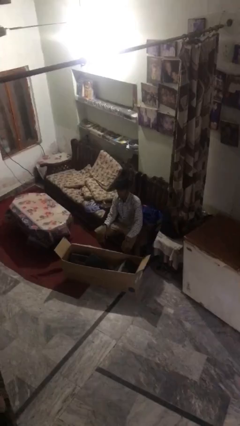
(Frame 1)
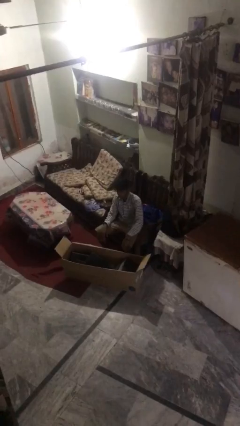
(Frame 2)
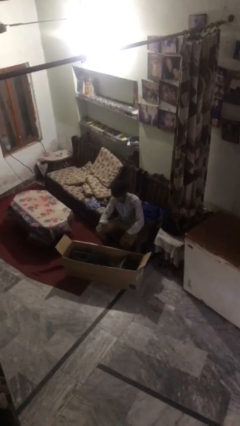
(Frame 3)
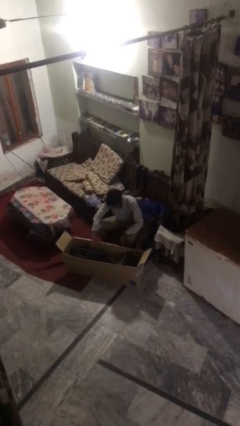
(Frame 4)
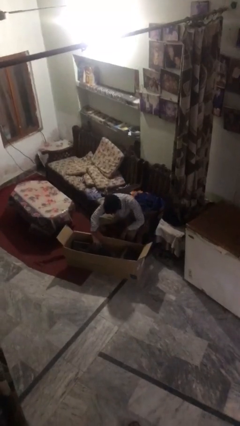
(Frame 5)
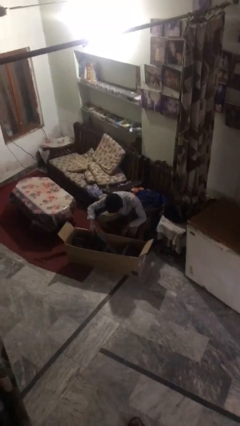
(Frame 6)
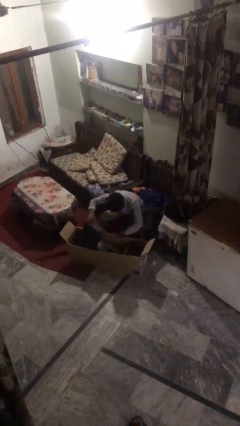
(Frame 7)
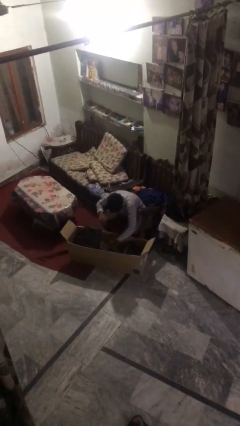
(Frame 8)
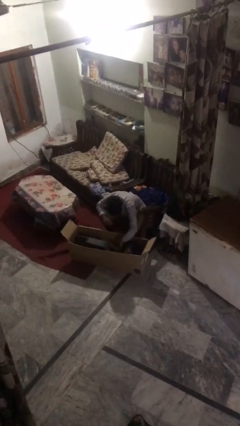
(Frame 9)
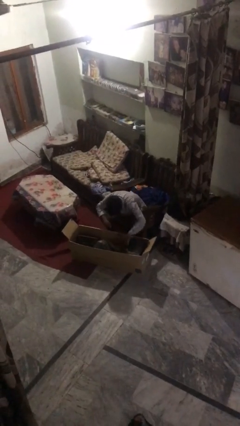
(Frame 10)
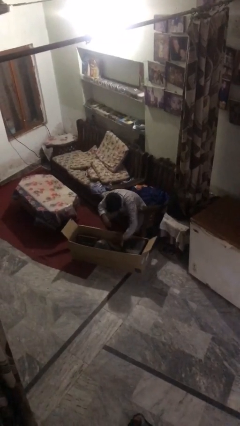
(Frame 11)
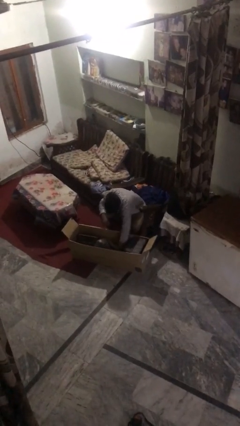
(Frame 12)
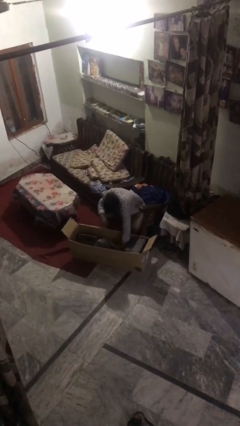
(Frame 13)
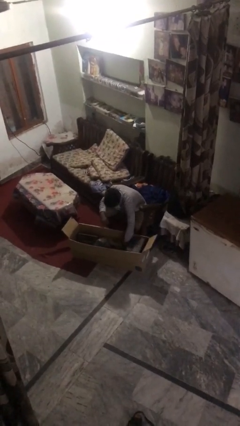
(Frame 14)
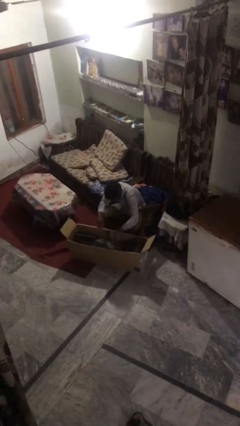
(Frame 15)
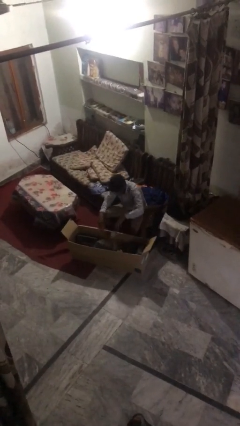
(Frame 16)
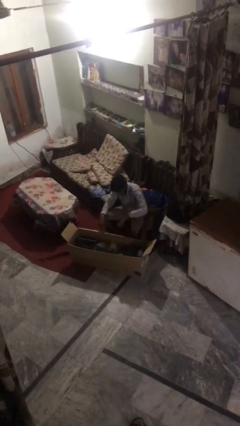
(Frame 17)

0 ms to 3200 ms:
person searches in box

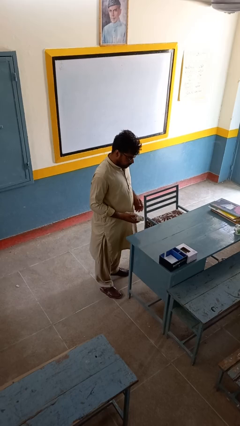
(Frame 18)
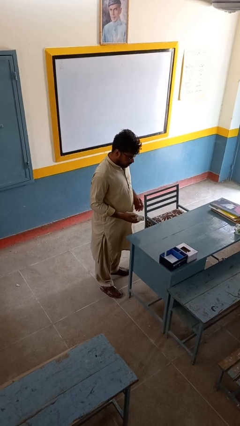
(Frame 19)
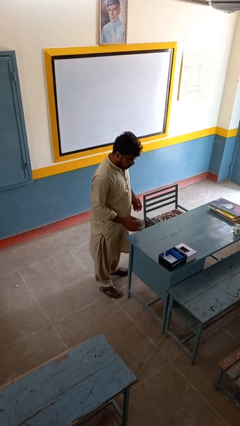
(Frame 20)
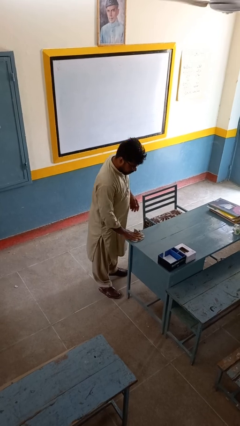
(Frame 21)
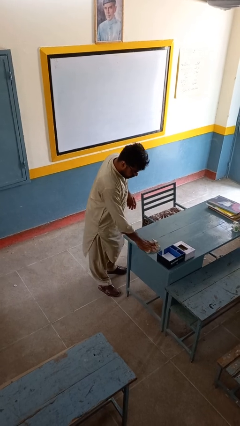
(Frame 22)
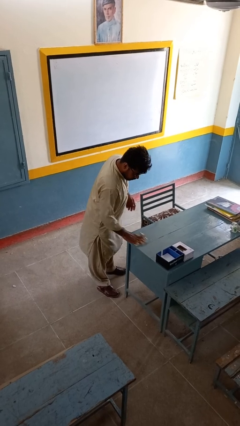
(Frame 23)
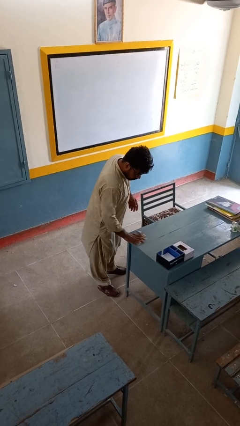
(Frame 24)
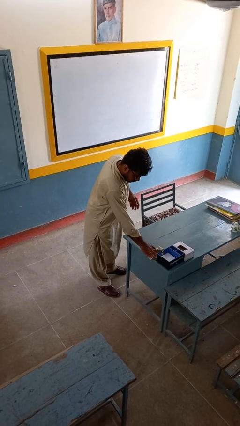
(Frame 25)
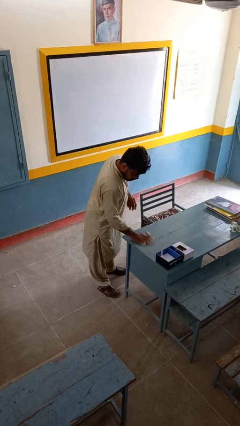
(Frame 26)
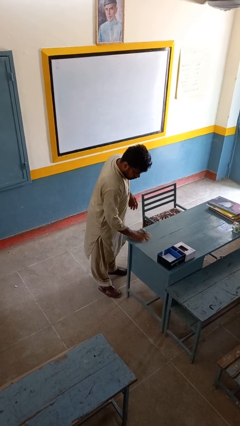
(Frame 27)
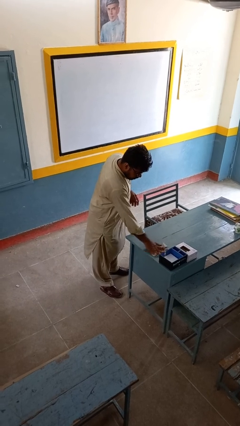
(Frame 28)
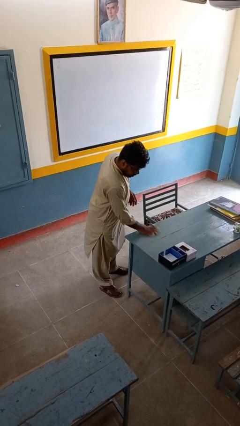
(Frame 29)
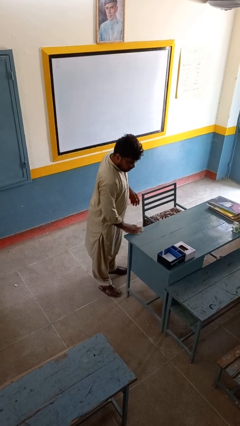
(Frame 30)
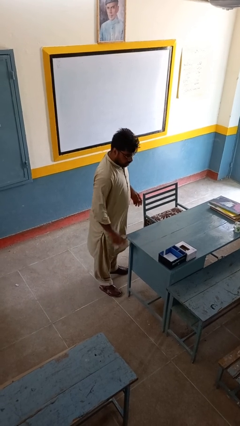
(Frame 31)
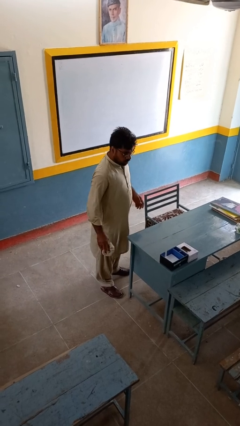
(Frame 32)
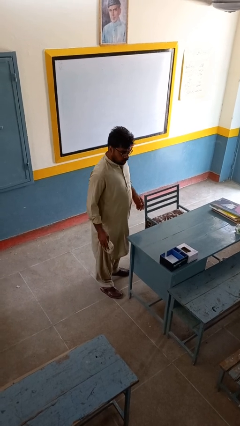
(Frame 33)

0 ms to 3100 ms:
person cleans table with rag

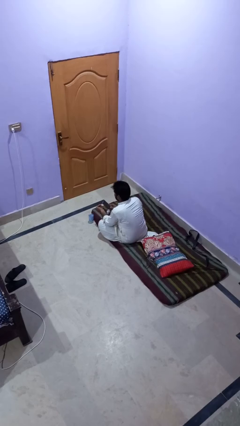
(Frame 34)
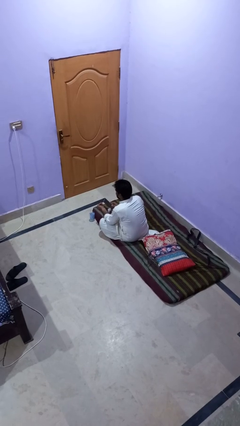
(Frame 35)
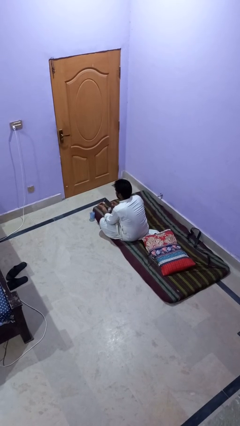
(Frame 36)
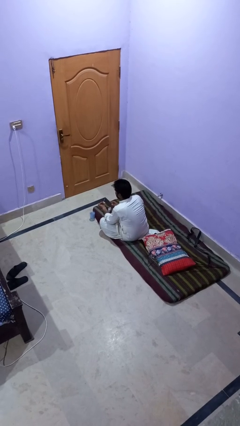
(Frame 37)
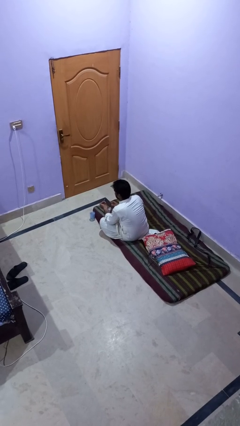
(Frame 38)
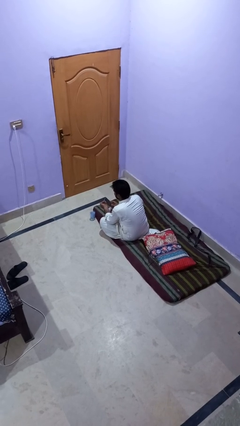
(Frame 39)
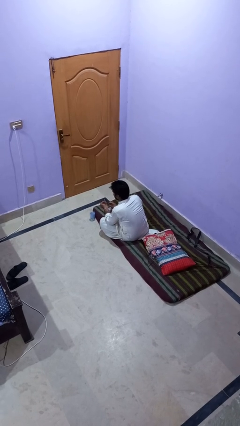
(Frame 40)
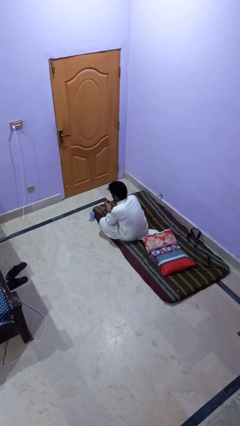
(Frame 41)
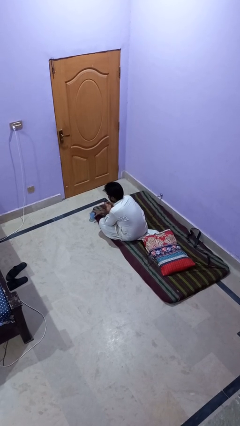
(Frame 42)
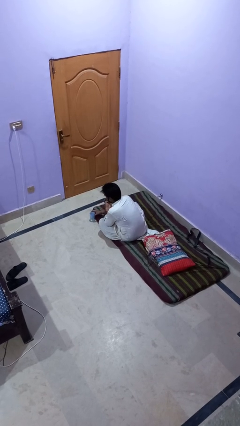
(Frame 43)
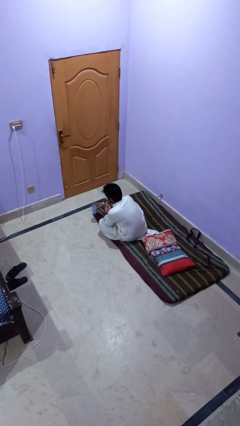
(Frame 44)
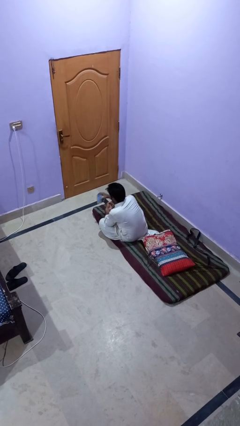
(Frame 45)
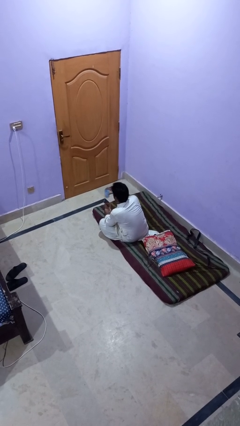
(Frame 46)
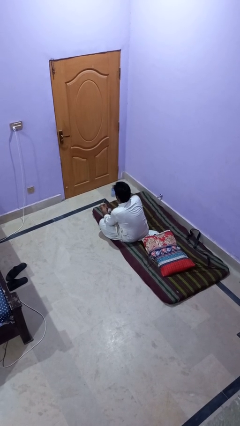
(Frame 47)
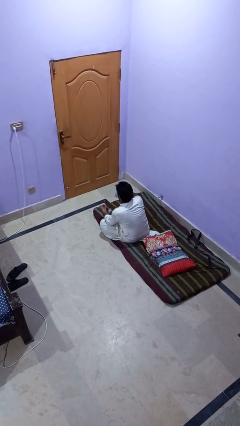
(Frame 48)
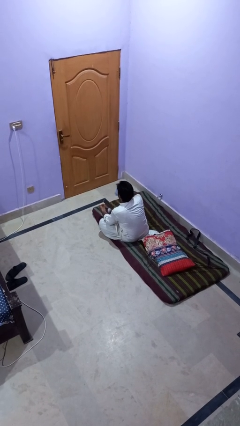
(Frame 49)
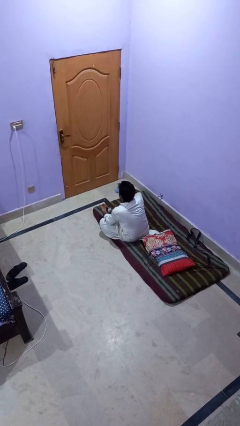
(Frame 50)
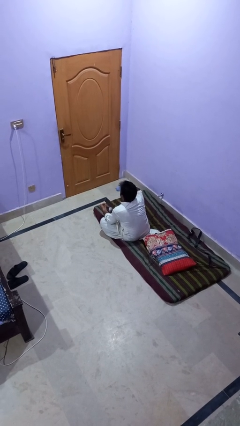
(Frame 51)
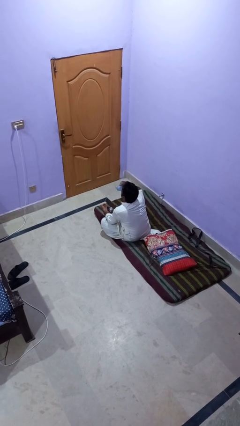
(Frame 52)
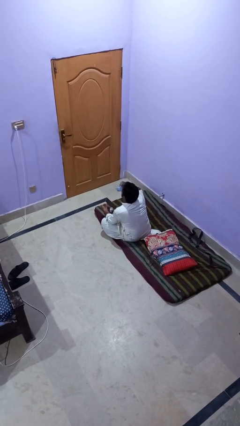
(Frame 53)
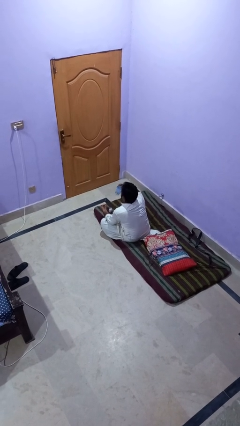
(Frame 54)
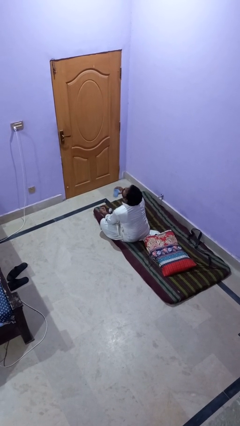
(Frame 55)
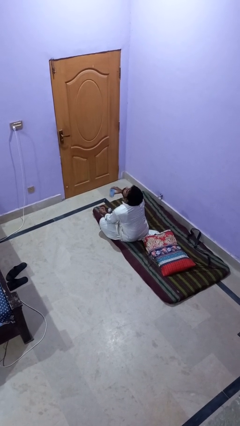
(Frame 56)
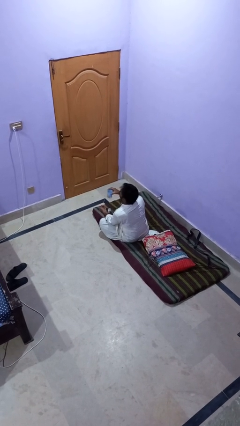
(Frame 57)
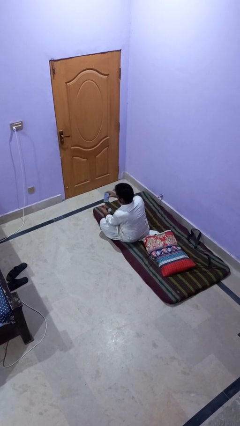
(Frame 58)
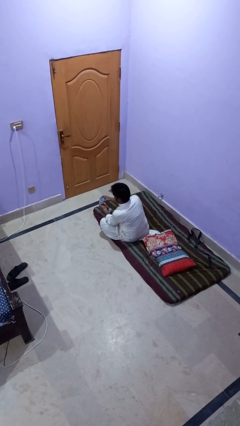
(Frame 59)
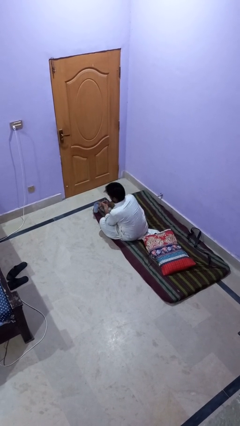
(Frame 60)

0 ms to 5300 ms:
person drinks from cup

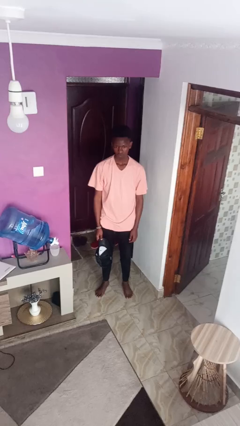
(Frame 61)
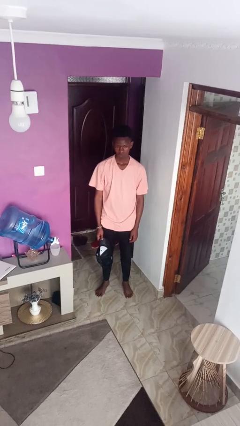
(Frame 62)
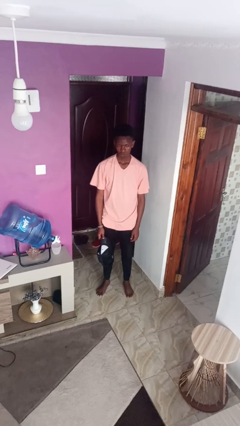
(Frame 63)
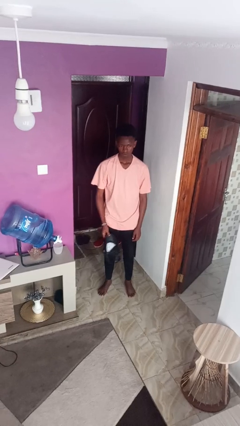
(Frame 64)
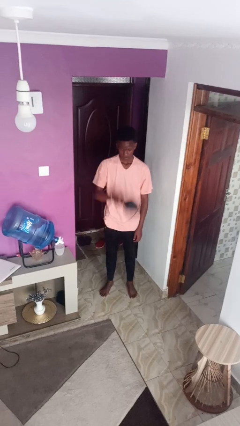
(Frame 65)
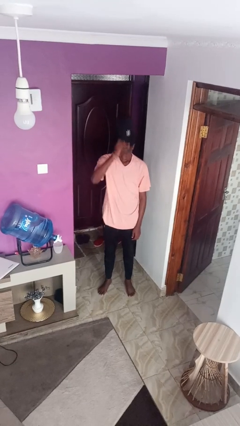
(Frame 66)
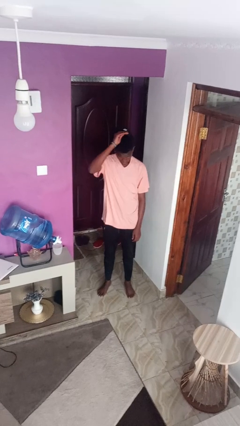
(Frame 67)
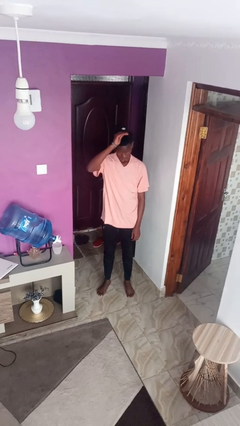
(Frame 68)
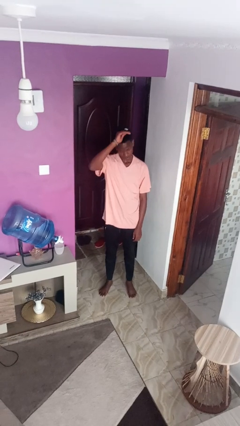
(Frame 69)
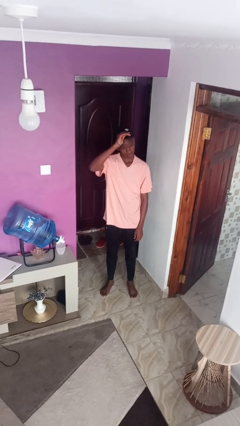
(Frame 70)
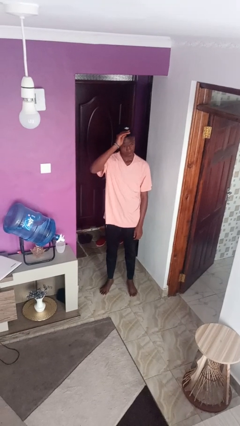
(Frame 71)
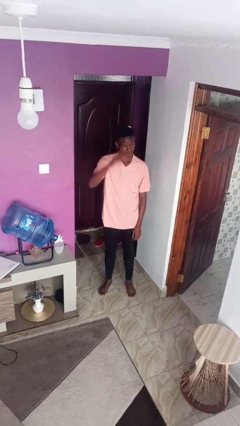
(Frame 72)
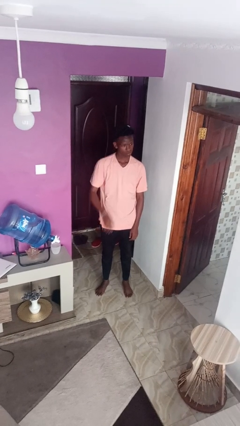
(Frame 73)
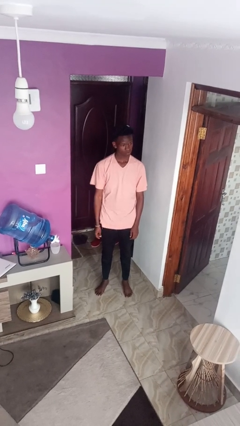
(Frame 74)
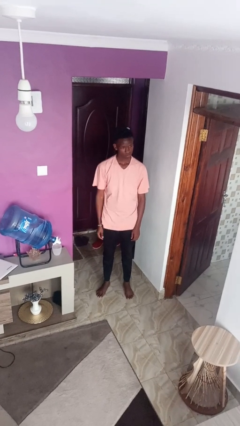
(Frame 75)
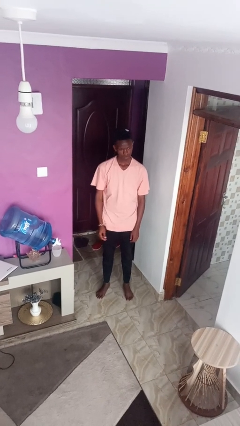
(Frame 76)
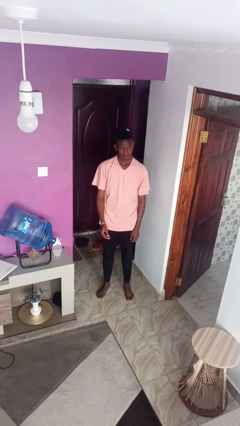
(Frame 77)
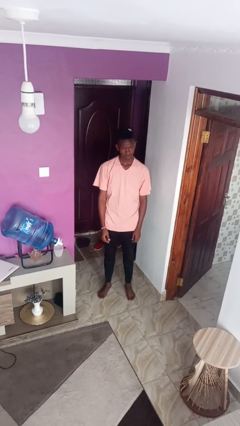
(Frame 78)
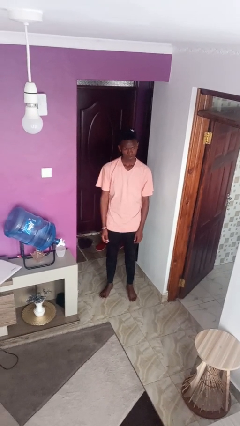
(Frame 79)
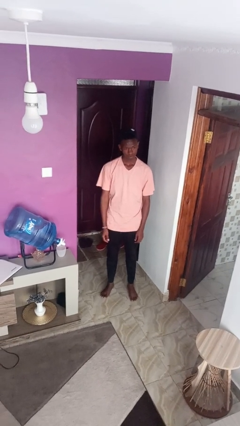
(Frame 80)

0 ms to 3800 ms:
person puts on hat

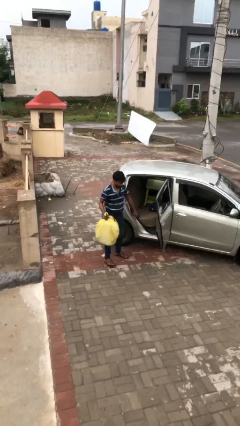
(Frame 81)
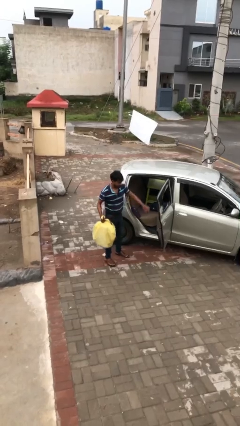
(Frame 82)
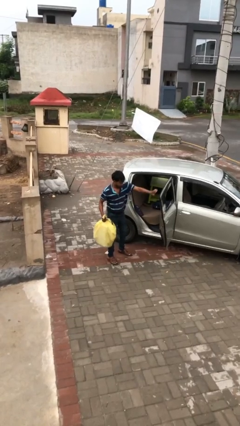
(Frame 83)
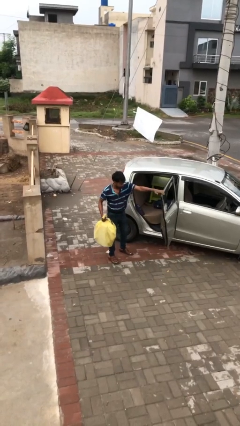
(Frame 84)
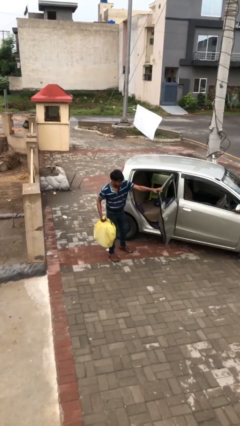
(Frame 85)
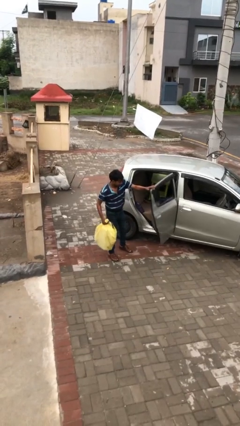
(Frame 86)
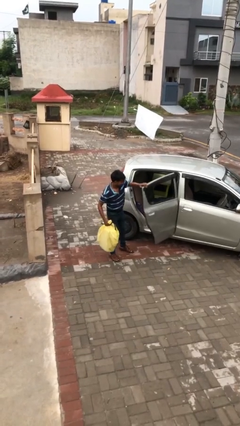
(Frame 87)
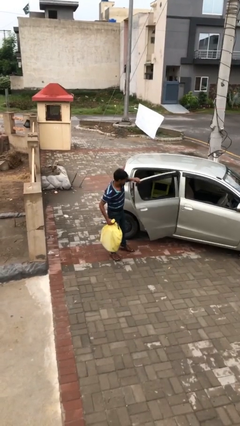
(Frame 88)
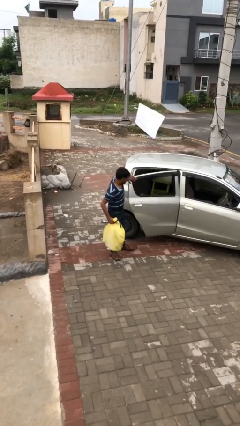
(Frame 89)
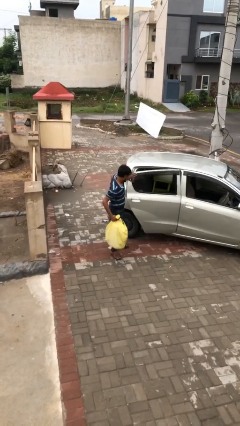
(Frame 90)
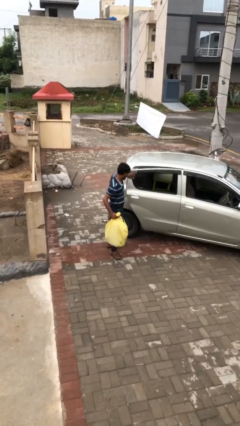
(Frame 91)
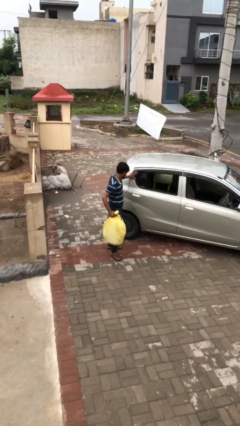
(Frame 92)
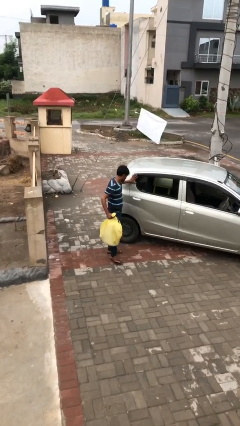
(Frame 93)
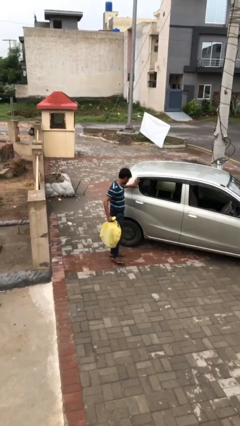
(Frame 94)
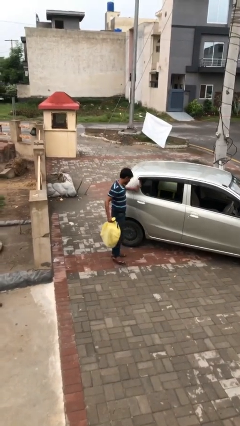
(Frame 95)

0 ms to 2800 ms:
person closes car door
